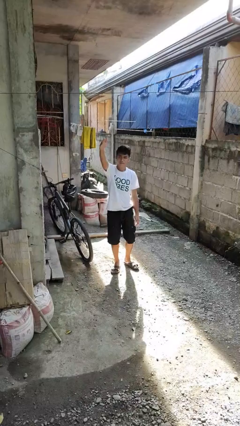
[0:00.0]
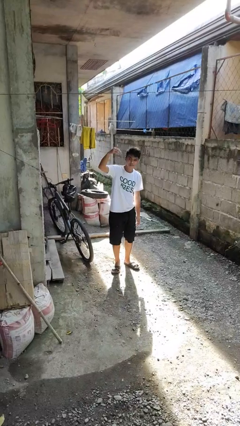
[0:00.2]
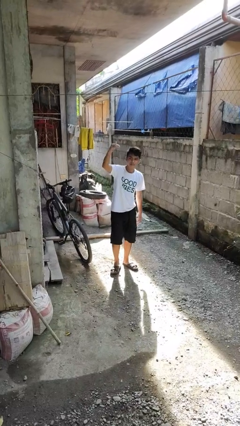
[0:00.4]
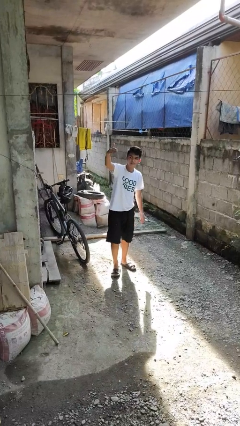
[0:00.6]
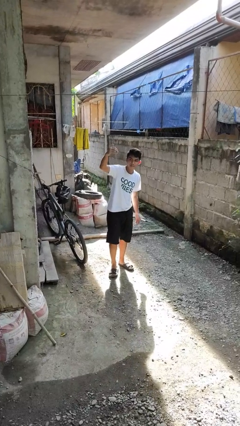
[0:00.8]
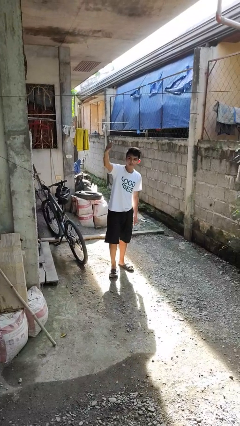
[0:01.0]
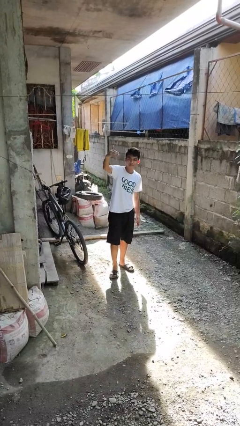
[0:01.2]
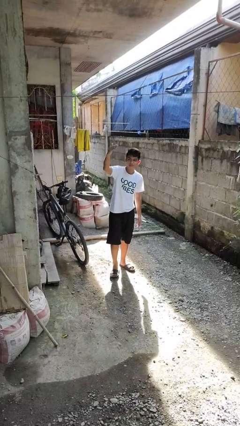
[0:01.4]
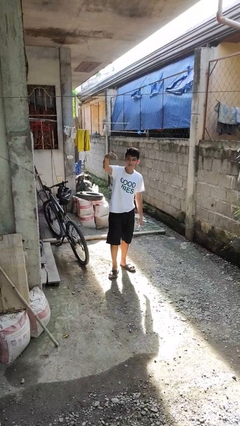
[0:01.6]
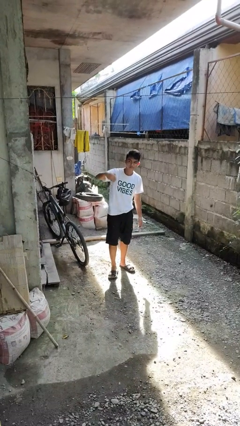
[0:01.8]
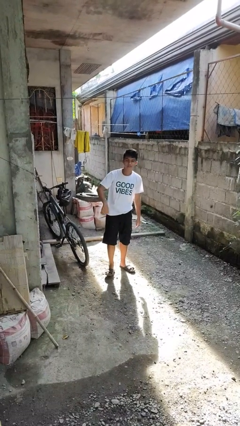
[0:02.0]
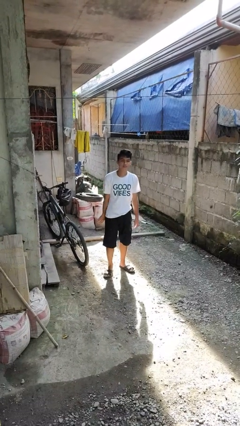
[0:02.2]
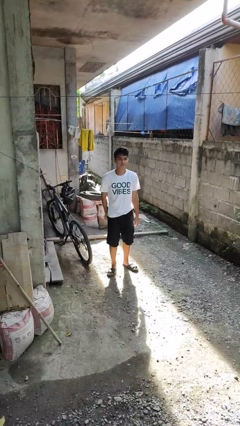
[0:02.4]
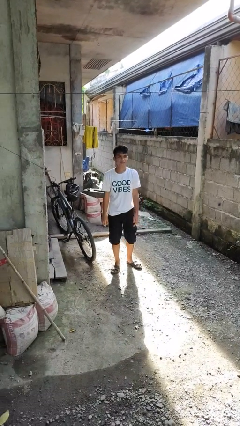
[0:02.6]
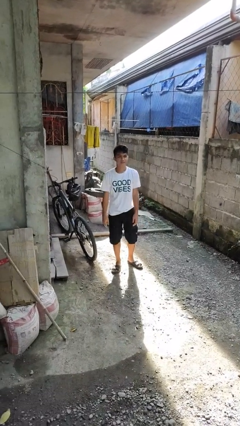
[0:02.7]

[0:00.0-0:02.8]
person gestures come here

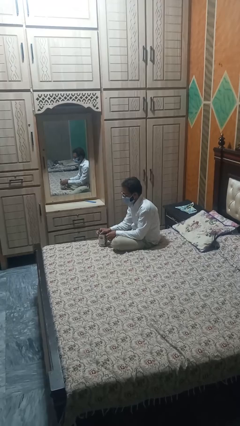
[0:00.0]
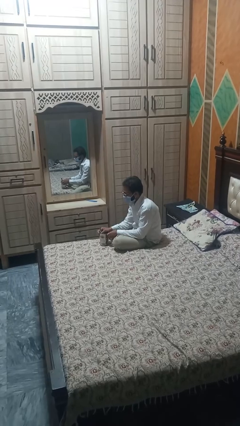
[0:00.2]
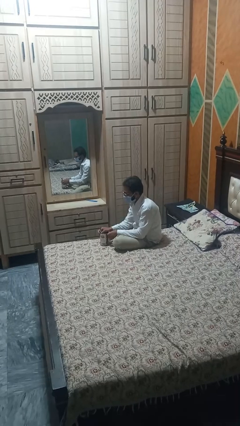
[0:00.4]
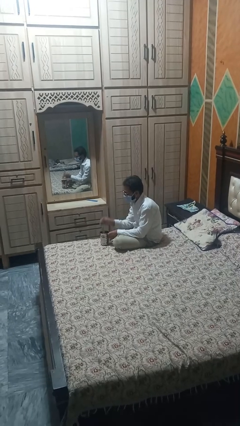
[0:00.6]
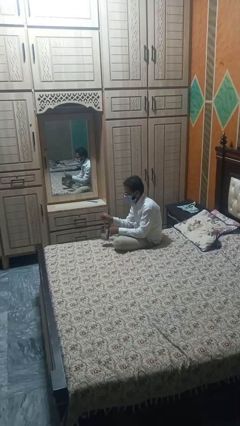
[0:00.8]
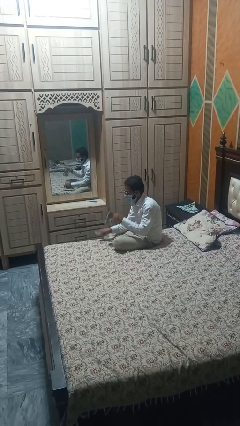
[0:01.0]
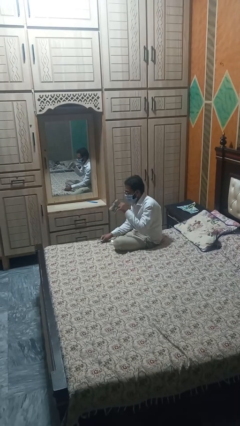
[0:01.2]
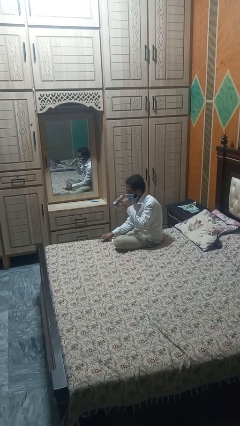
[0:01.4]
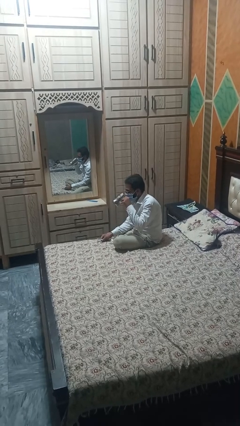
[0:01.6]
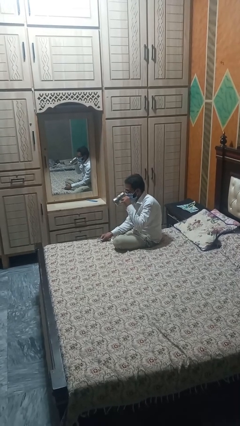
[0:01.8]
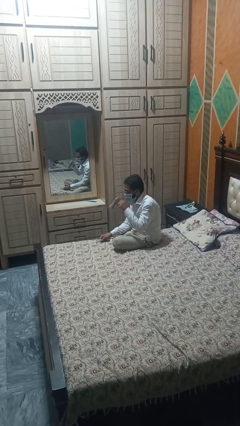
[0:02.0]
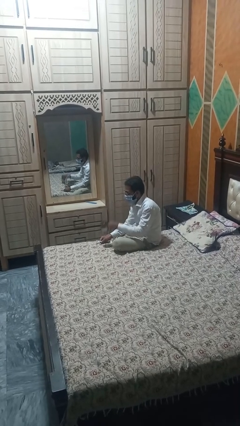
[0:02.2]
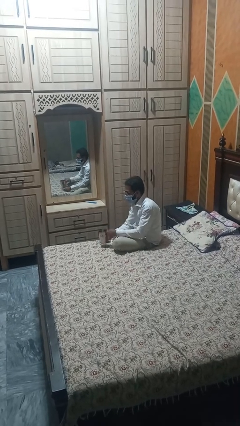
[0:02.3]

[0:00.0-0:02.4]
person drinks from mug

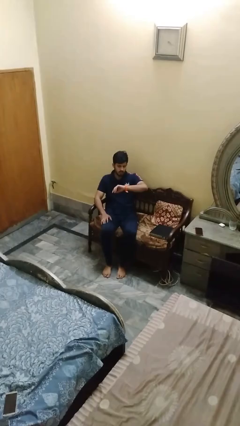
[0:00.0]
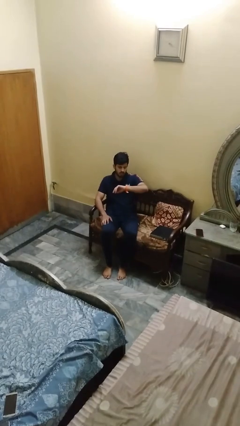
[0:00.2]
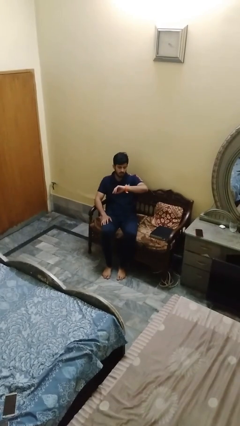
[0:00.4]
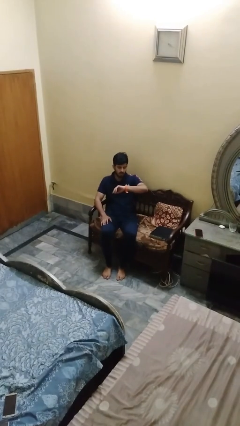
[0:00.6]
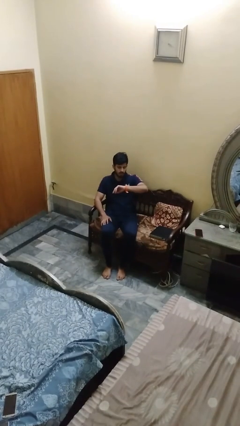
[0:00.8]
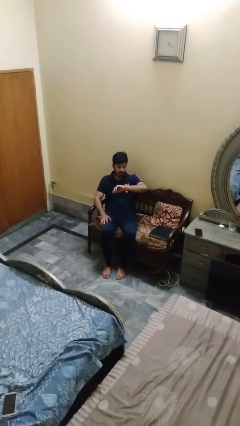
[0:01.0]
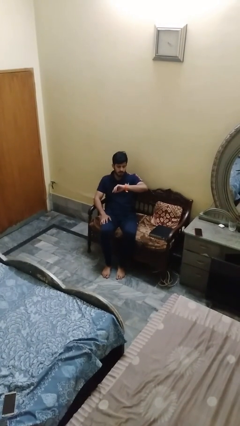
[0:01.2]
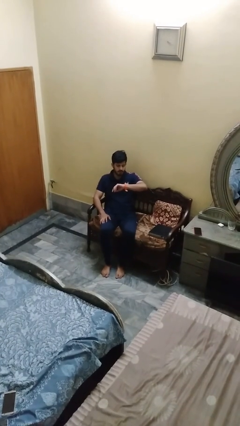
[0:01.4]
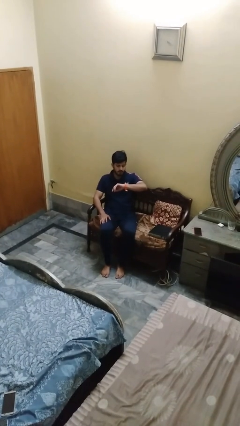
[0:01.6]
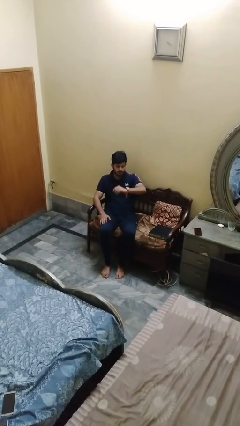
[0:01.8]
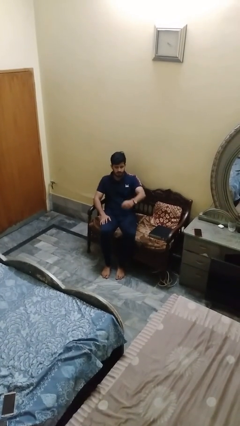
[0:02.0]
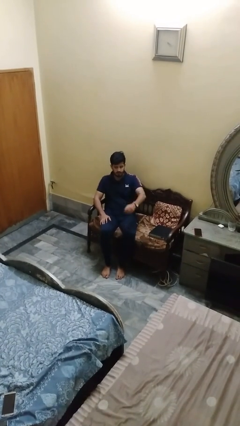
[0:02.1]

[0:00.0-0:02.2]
person looks at wristwatch

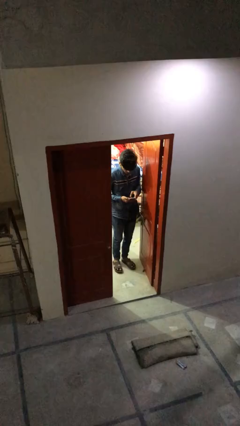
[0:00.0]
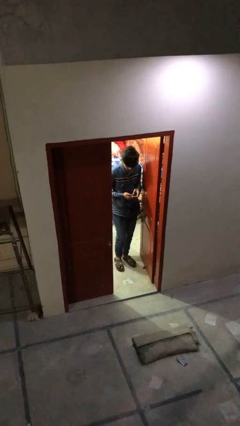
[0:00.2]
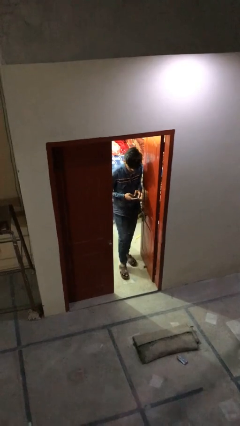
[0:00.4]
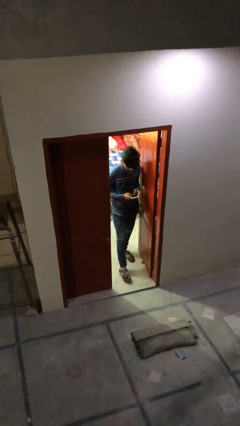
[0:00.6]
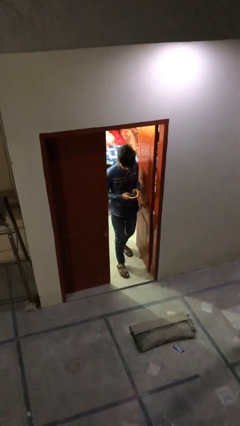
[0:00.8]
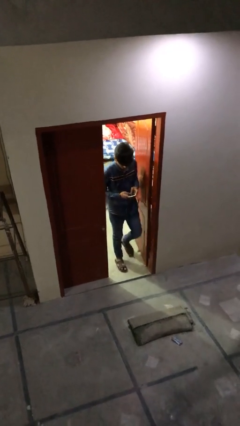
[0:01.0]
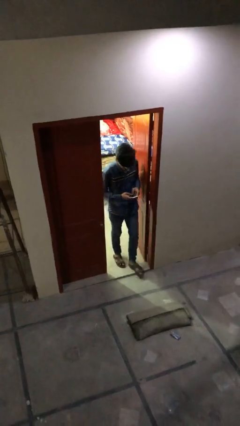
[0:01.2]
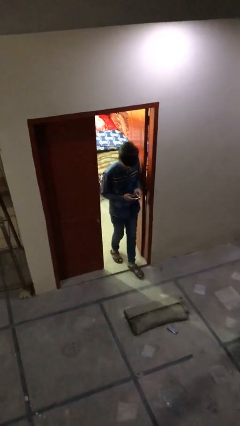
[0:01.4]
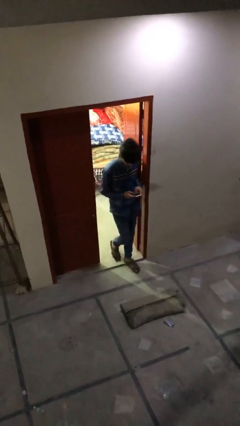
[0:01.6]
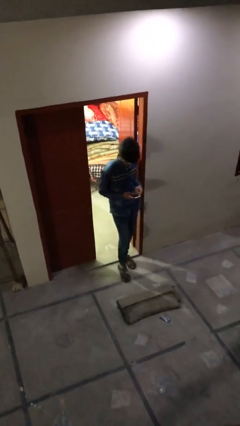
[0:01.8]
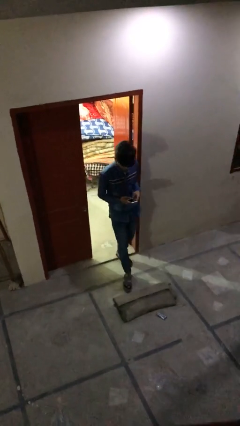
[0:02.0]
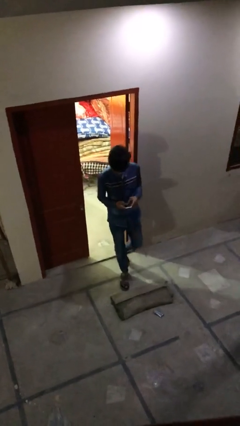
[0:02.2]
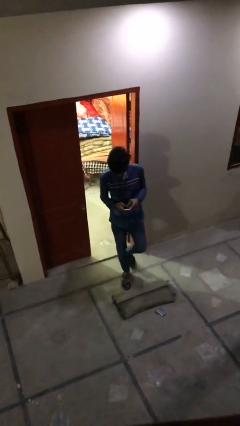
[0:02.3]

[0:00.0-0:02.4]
person enters scene through structure

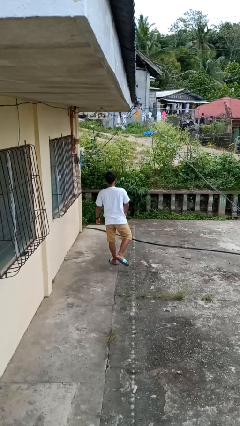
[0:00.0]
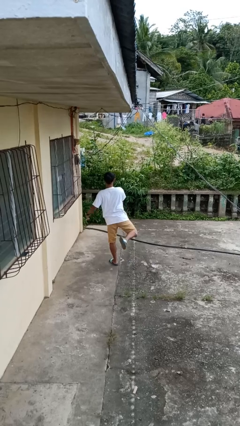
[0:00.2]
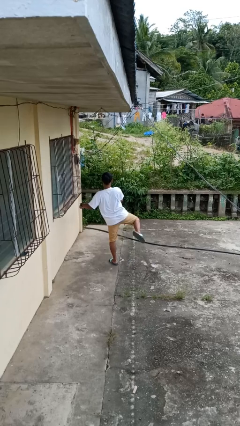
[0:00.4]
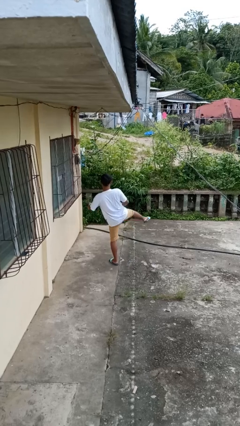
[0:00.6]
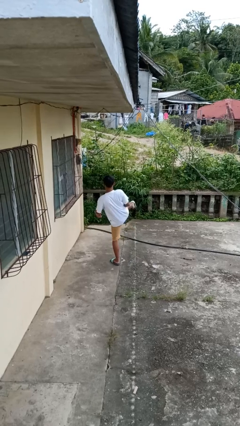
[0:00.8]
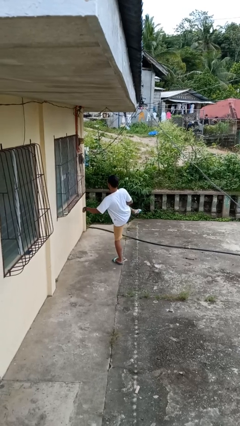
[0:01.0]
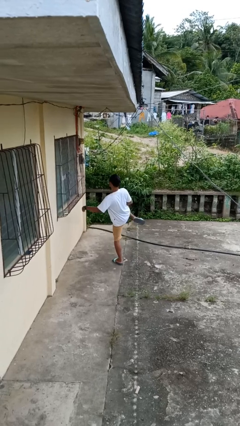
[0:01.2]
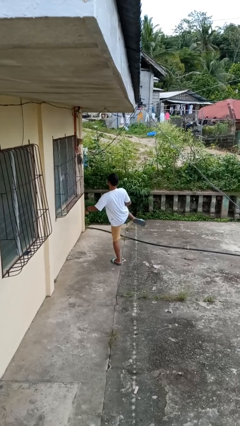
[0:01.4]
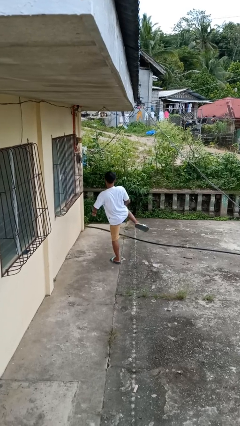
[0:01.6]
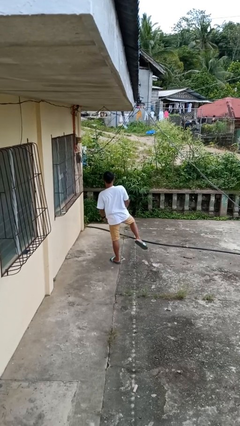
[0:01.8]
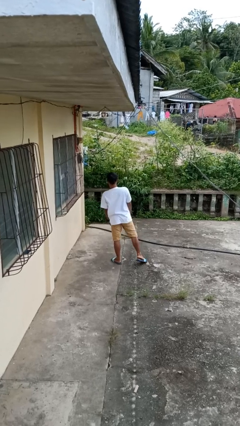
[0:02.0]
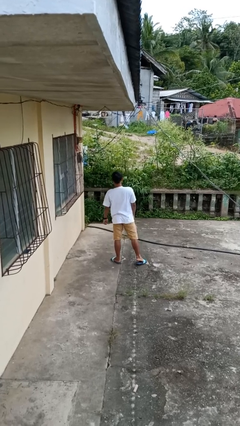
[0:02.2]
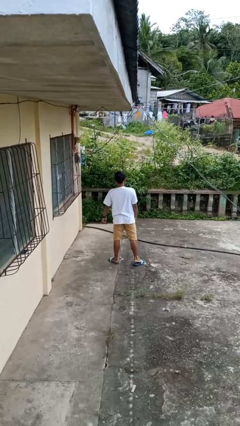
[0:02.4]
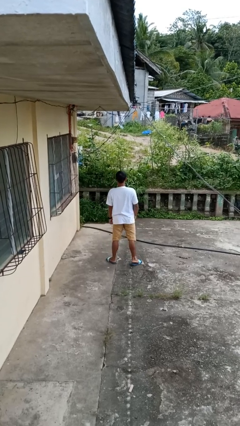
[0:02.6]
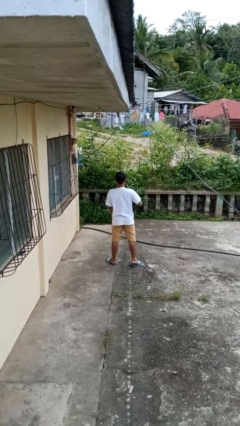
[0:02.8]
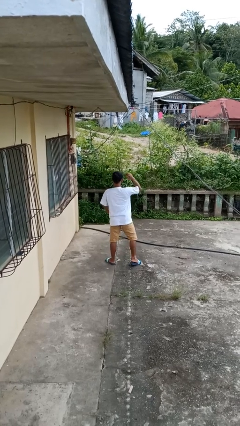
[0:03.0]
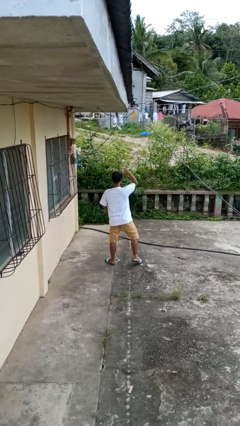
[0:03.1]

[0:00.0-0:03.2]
person karate kicks

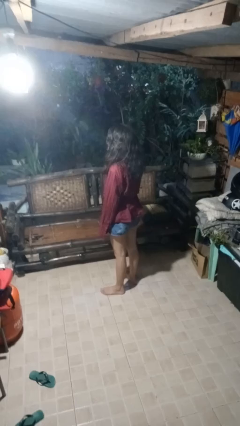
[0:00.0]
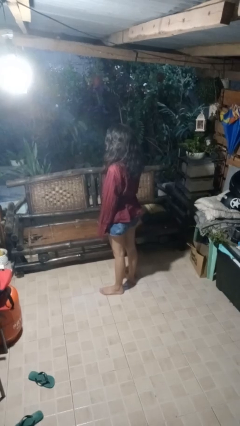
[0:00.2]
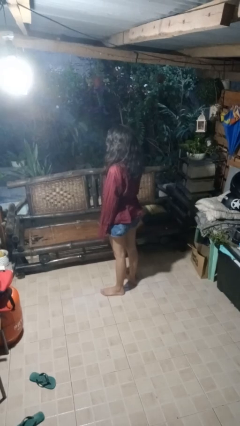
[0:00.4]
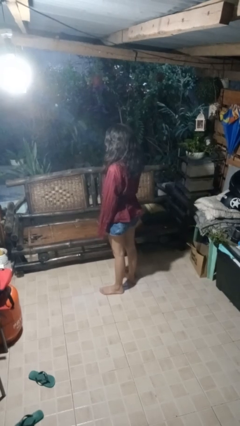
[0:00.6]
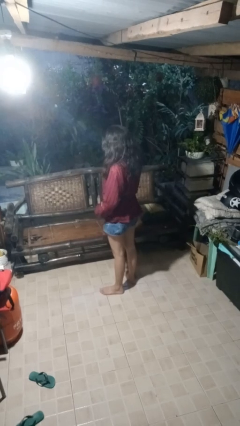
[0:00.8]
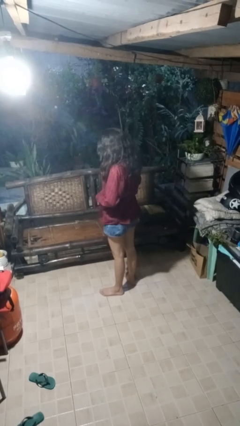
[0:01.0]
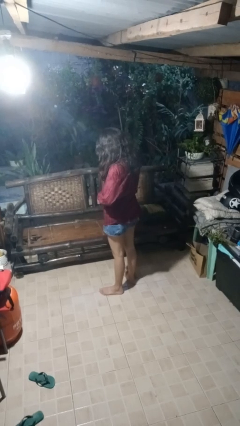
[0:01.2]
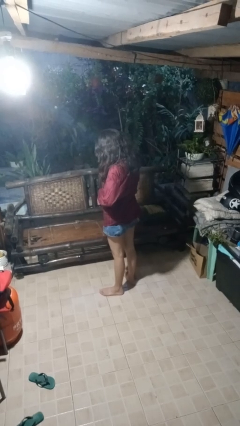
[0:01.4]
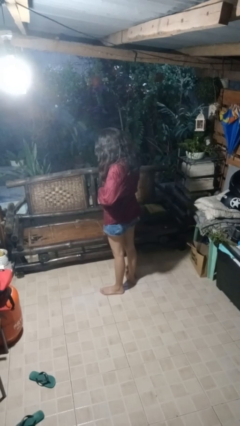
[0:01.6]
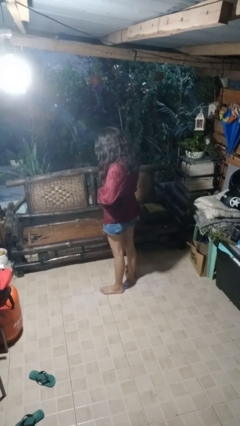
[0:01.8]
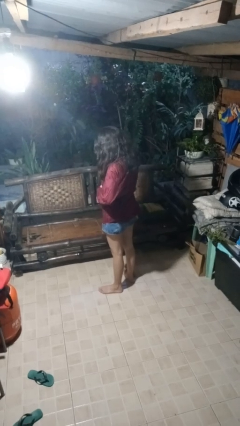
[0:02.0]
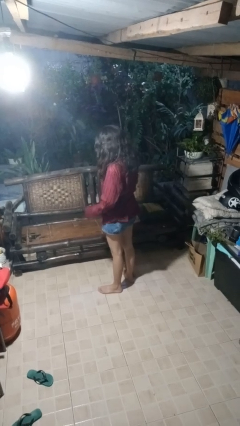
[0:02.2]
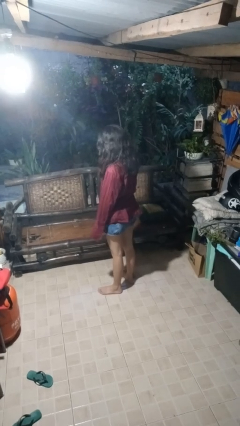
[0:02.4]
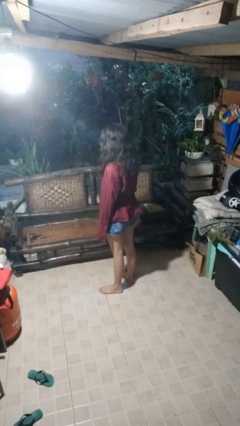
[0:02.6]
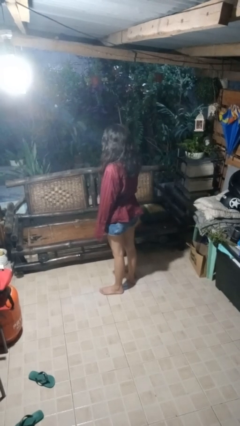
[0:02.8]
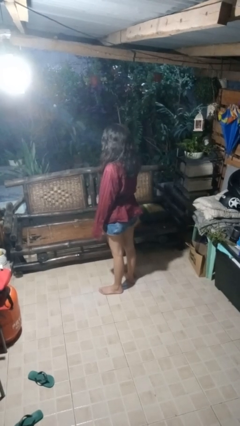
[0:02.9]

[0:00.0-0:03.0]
person unbuttons shirt

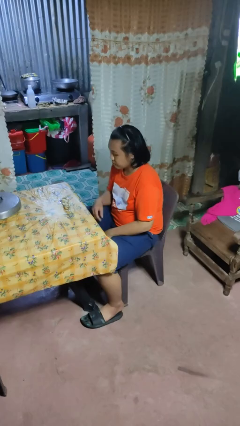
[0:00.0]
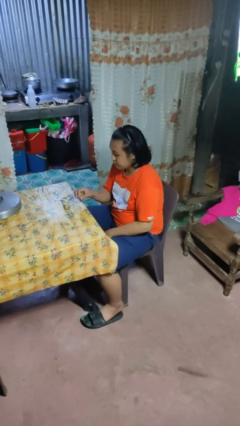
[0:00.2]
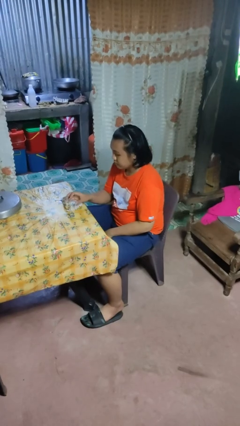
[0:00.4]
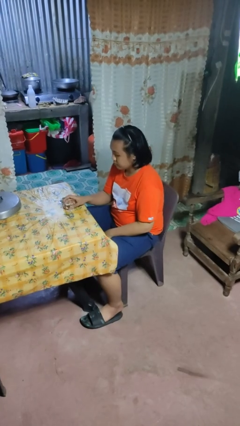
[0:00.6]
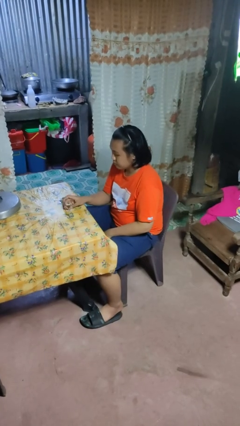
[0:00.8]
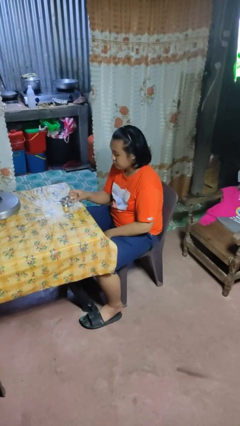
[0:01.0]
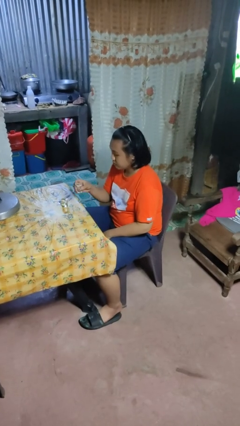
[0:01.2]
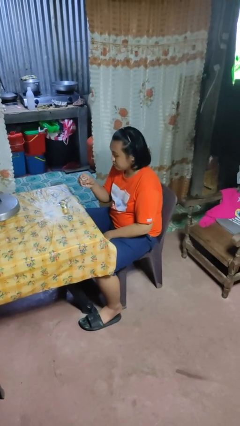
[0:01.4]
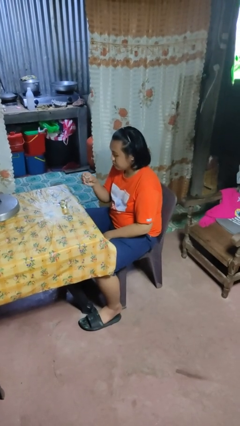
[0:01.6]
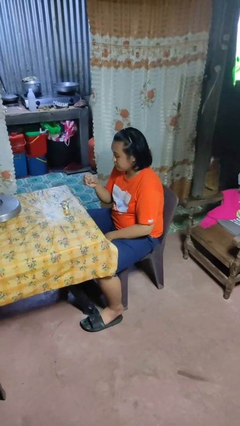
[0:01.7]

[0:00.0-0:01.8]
person picks up object from table
